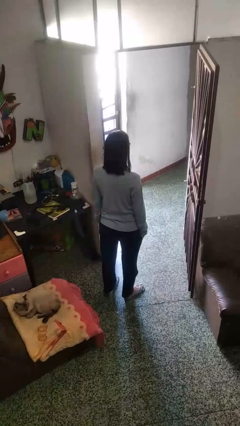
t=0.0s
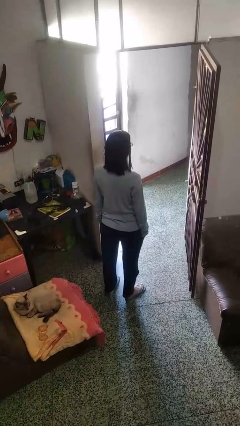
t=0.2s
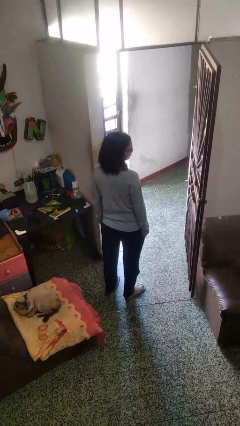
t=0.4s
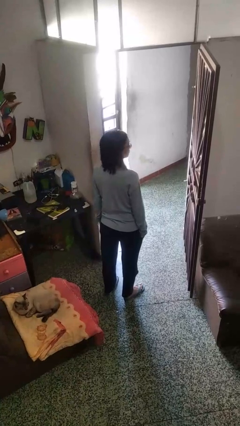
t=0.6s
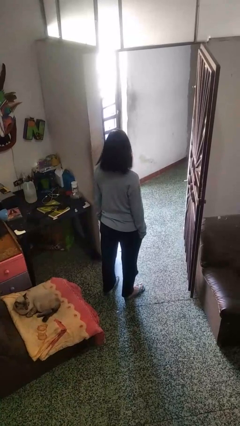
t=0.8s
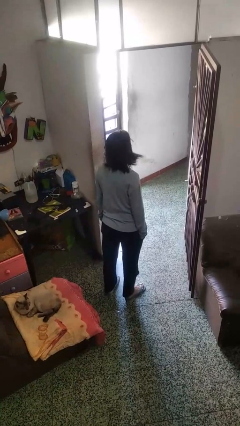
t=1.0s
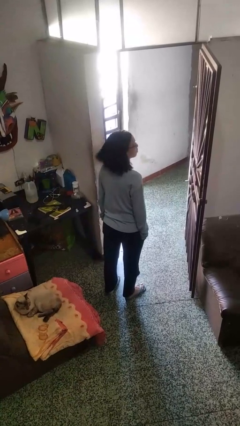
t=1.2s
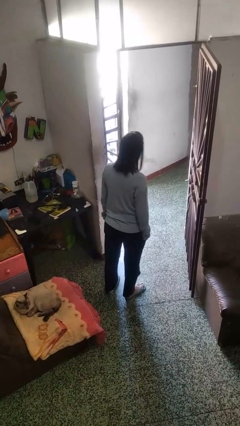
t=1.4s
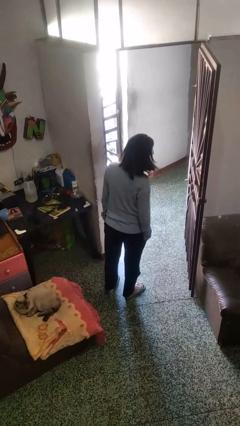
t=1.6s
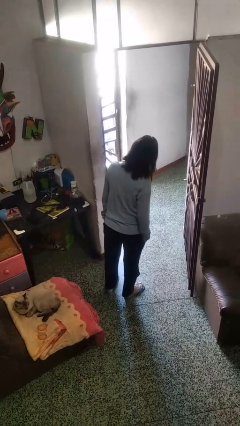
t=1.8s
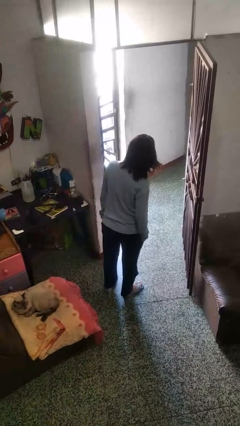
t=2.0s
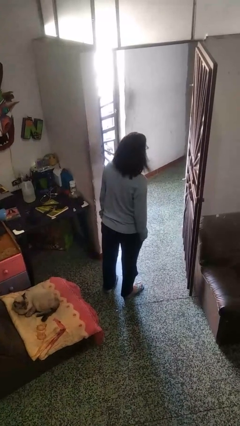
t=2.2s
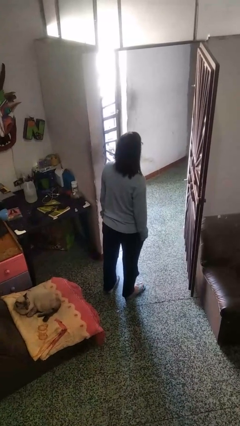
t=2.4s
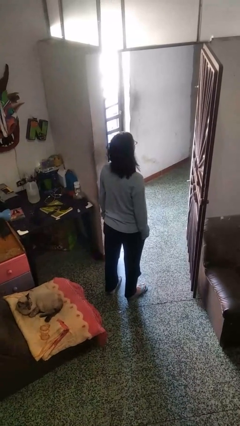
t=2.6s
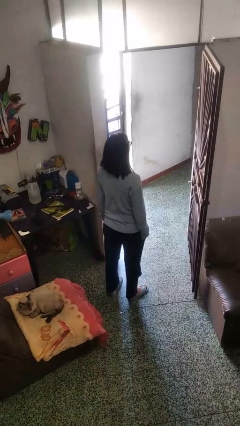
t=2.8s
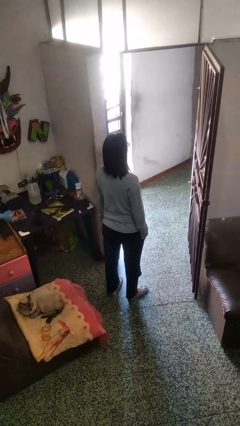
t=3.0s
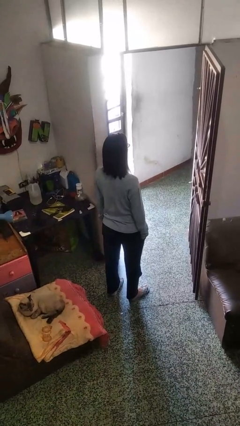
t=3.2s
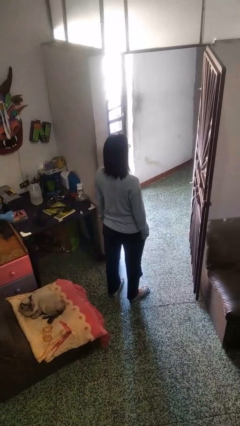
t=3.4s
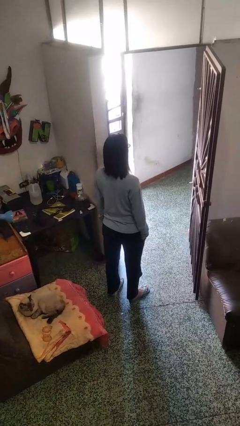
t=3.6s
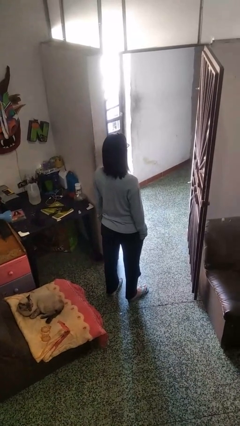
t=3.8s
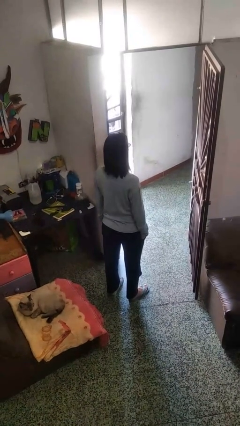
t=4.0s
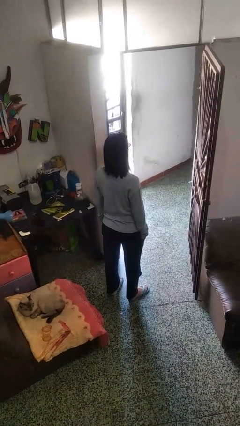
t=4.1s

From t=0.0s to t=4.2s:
person shakes head

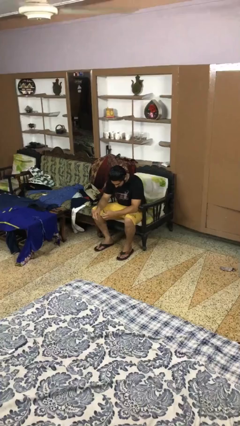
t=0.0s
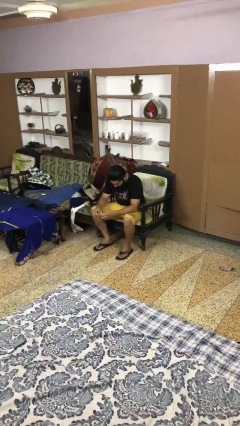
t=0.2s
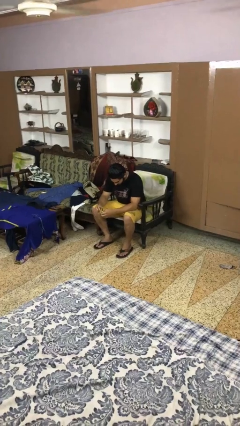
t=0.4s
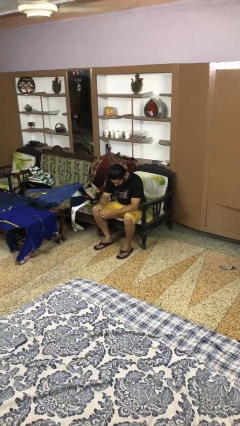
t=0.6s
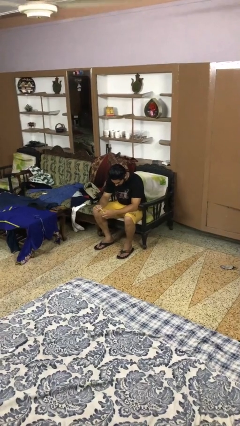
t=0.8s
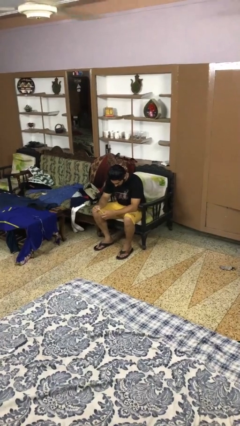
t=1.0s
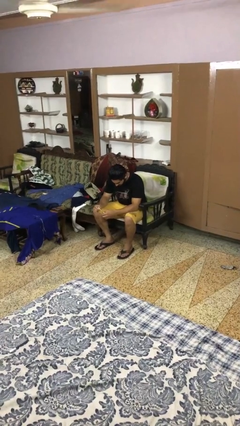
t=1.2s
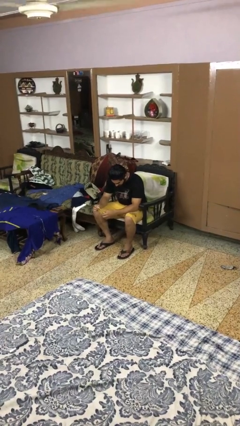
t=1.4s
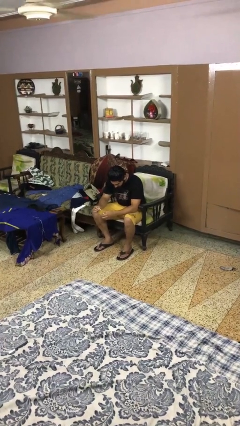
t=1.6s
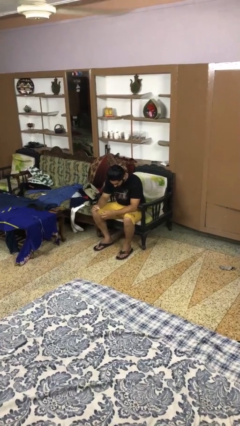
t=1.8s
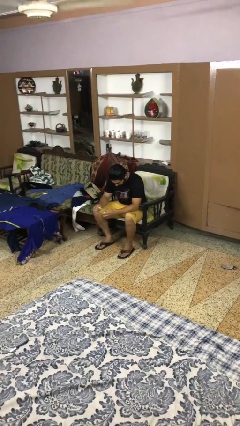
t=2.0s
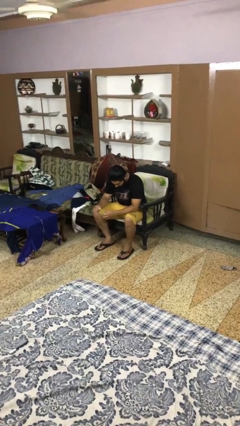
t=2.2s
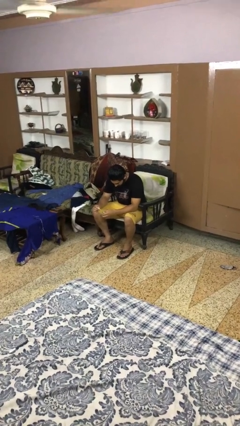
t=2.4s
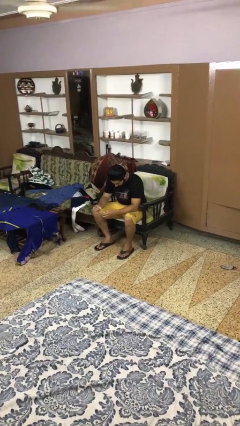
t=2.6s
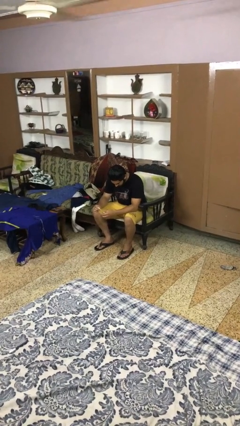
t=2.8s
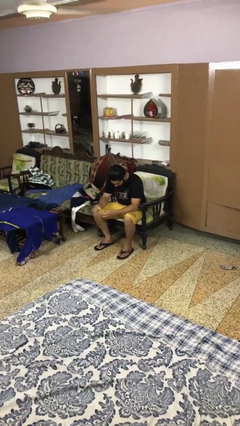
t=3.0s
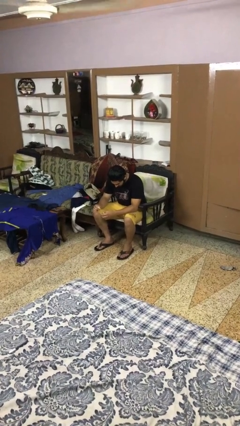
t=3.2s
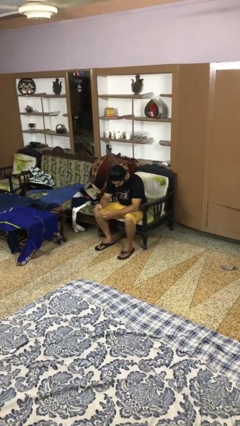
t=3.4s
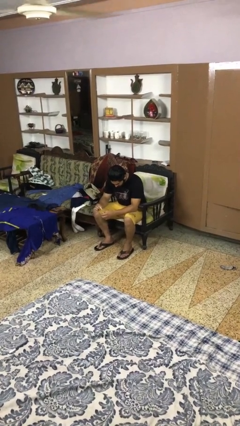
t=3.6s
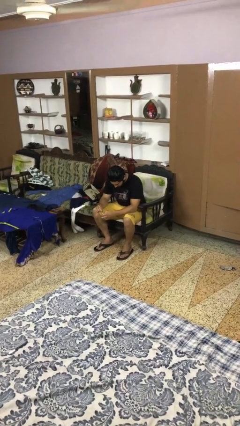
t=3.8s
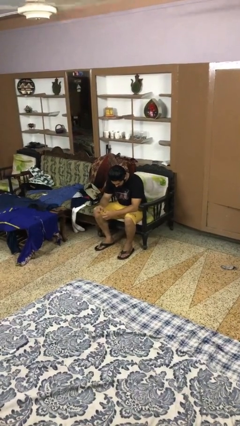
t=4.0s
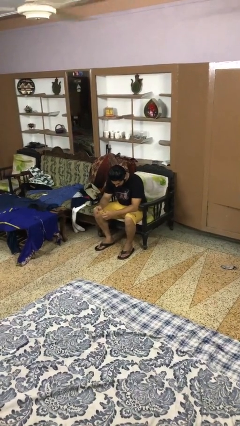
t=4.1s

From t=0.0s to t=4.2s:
person paints fingernails

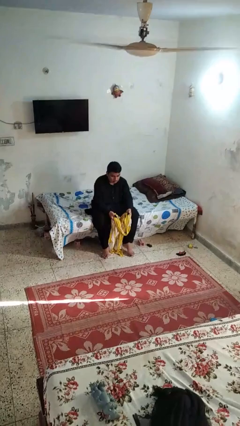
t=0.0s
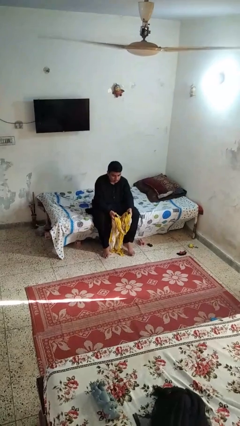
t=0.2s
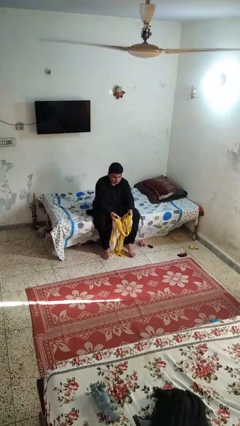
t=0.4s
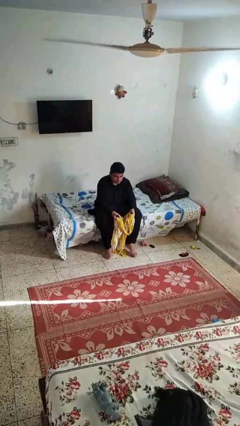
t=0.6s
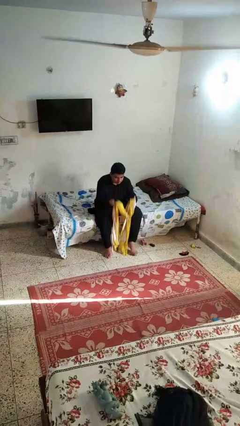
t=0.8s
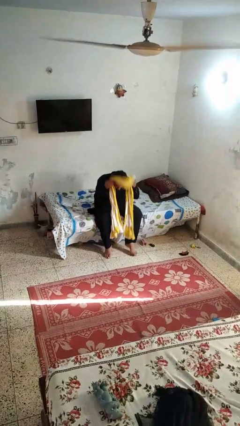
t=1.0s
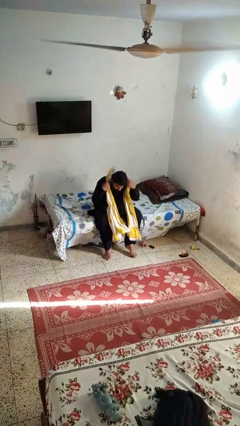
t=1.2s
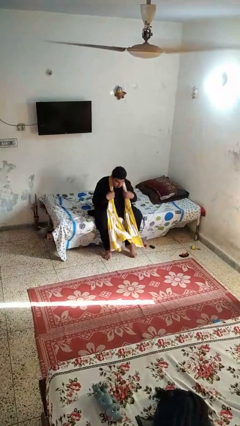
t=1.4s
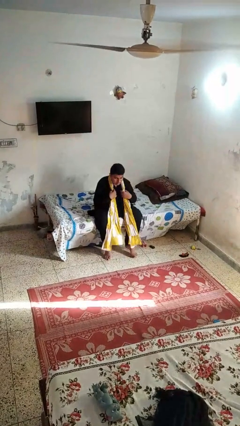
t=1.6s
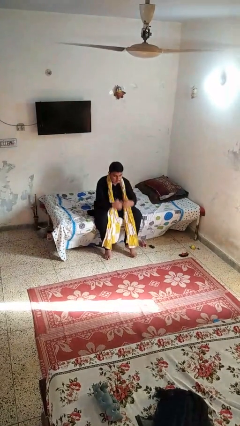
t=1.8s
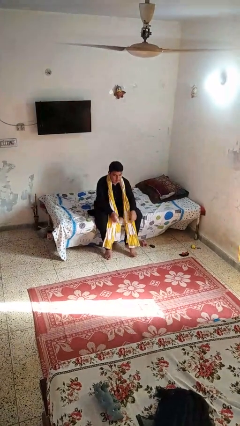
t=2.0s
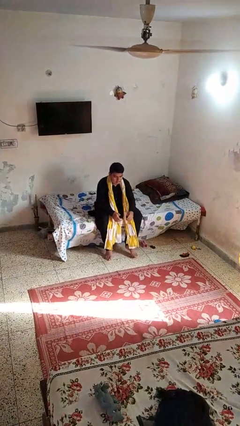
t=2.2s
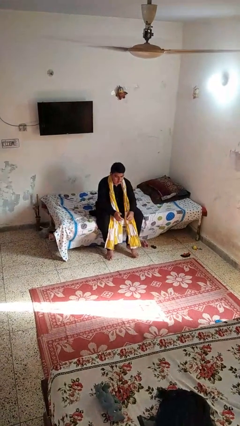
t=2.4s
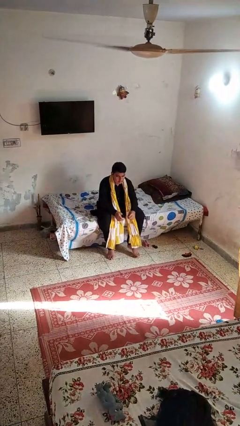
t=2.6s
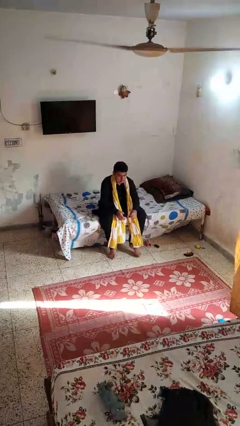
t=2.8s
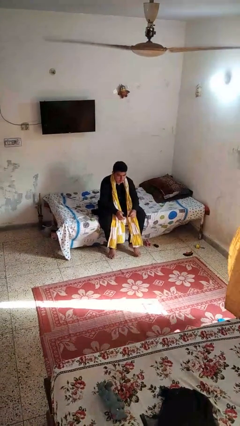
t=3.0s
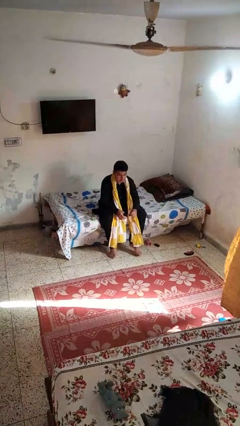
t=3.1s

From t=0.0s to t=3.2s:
person puts on scarf

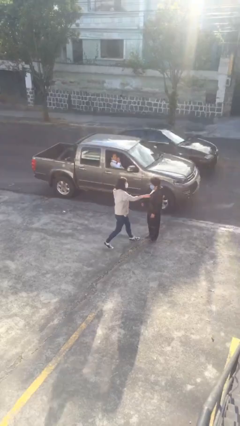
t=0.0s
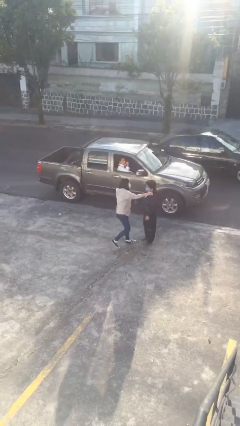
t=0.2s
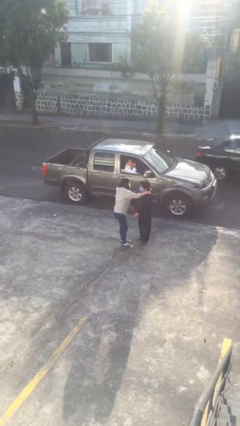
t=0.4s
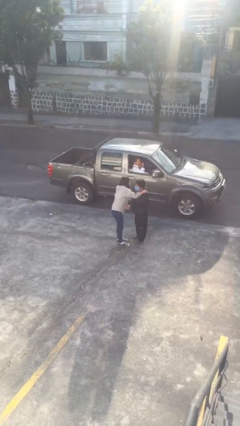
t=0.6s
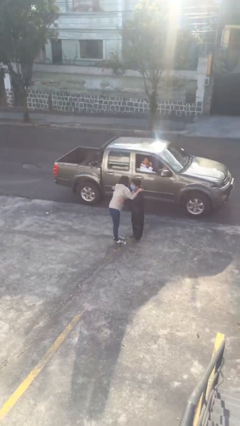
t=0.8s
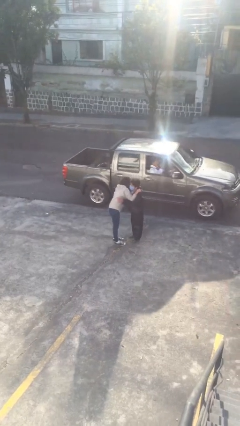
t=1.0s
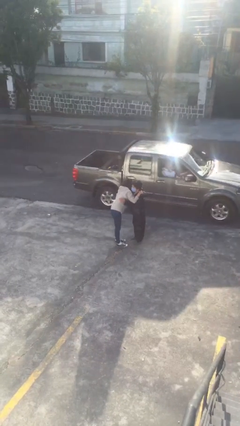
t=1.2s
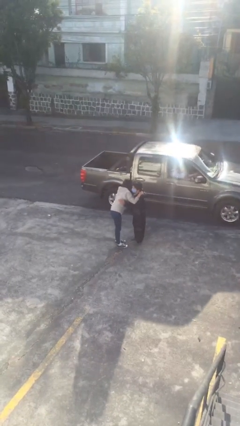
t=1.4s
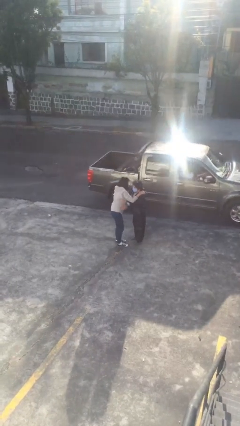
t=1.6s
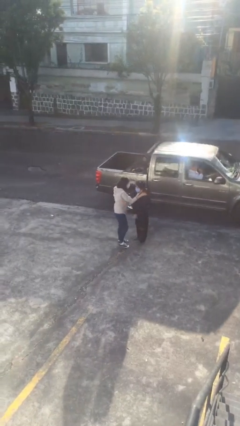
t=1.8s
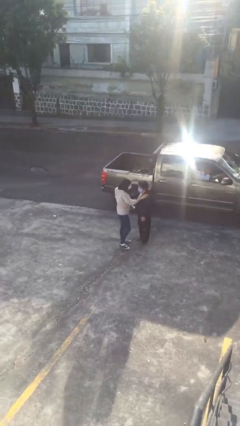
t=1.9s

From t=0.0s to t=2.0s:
person embraces person

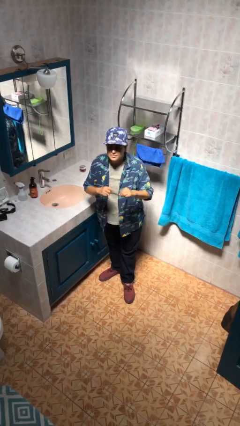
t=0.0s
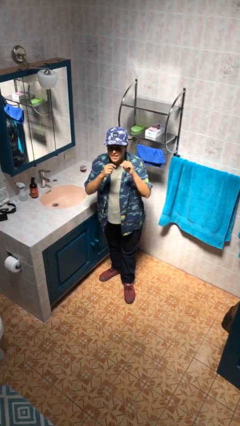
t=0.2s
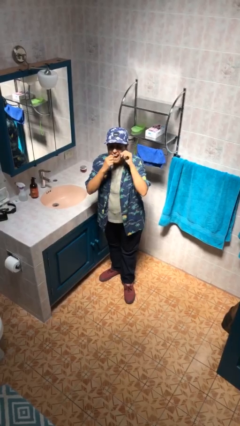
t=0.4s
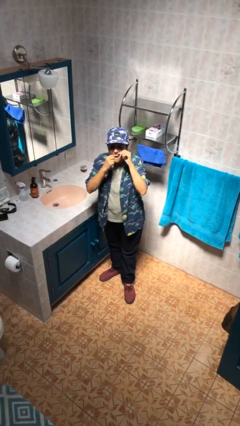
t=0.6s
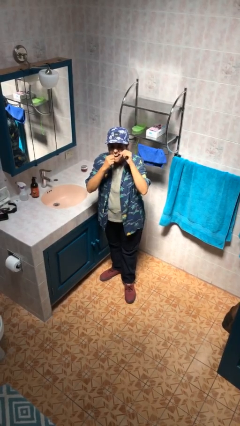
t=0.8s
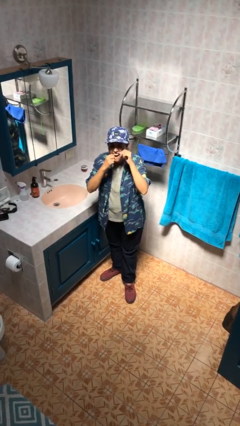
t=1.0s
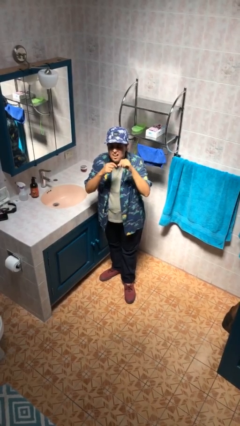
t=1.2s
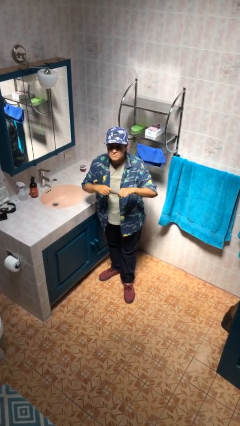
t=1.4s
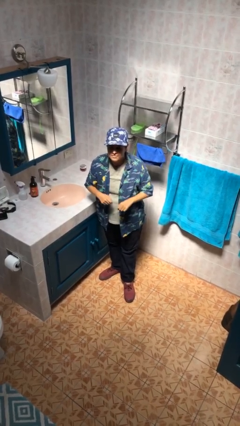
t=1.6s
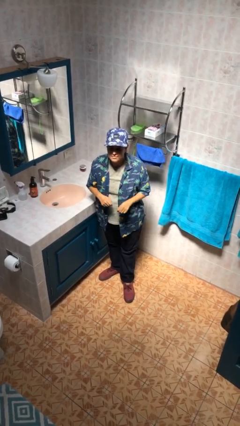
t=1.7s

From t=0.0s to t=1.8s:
person flosses

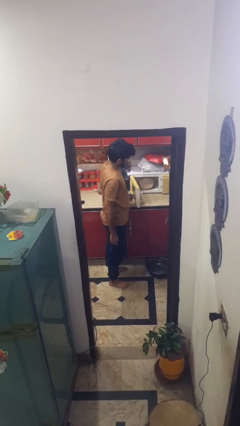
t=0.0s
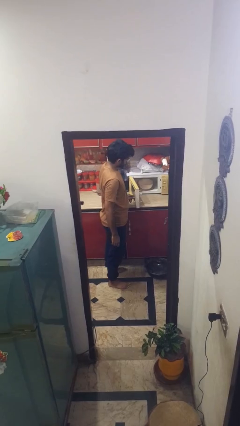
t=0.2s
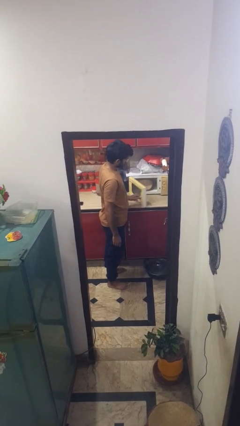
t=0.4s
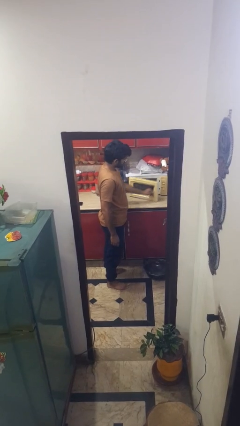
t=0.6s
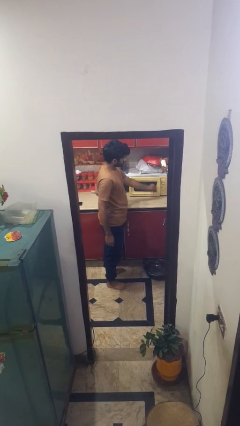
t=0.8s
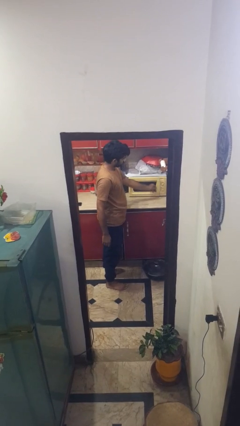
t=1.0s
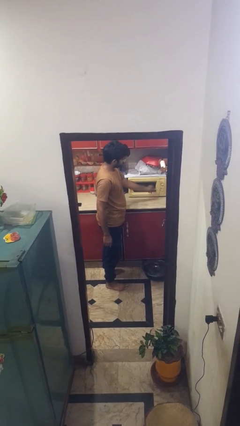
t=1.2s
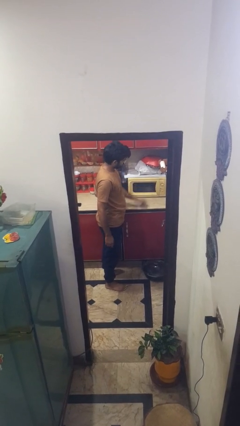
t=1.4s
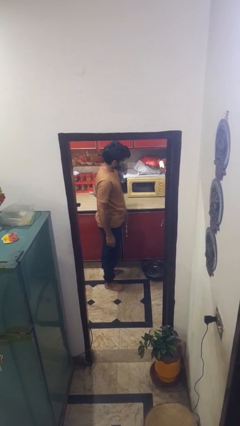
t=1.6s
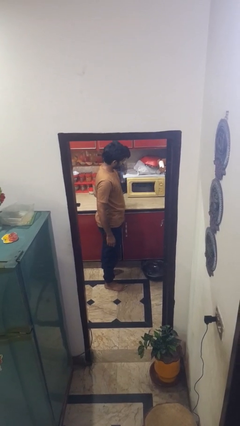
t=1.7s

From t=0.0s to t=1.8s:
person closes microwave
